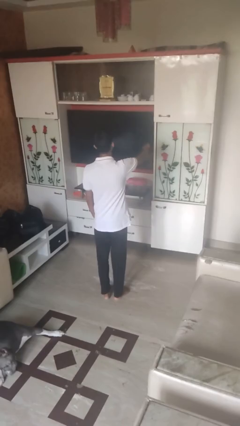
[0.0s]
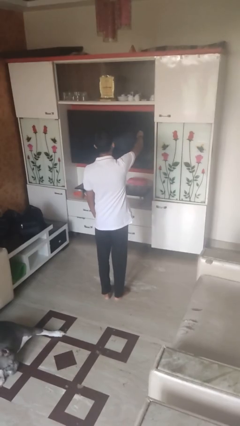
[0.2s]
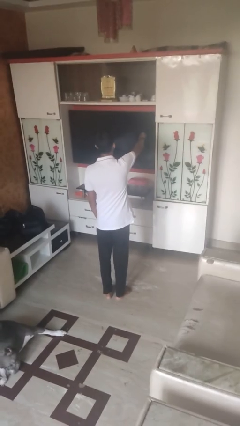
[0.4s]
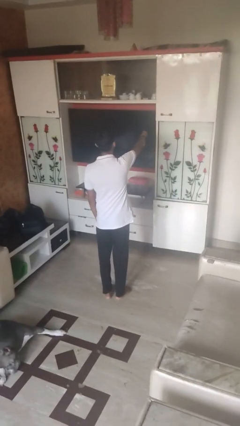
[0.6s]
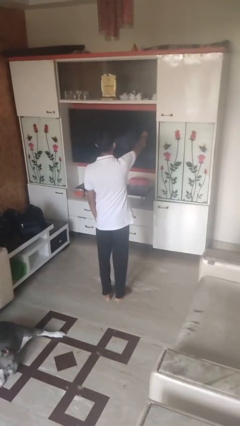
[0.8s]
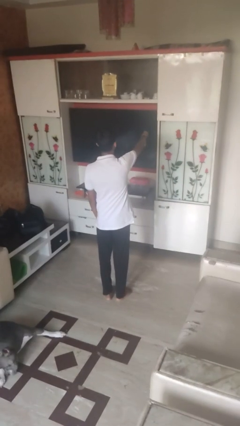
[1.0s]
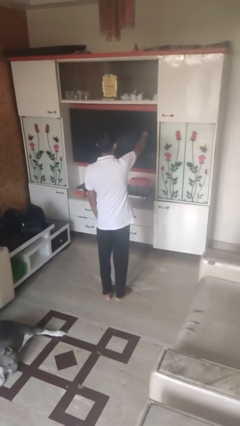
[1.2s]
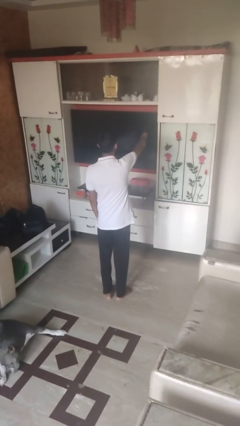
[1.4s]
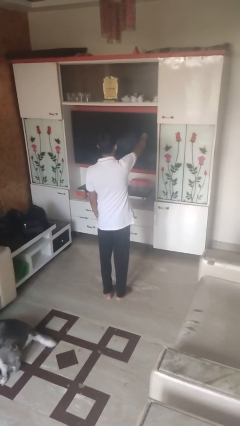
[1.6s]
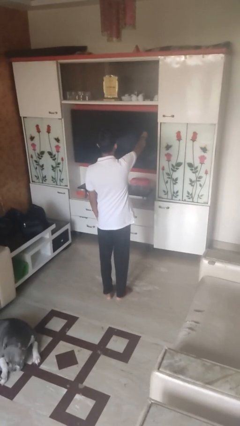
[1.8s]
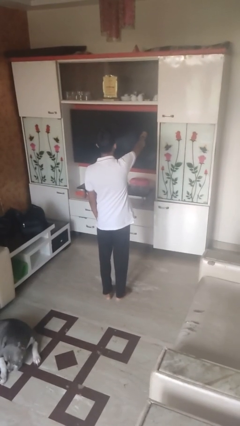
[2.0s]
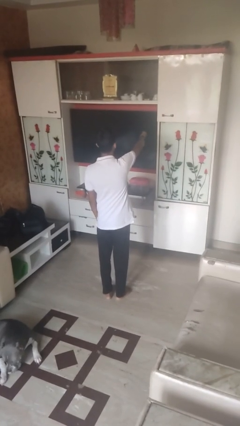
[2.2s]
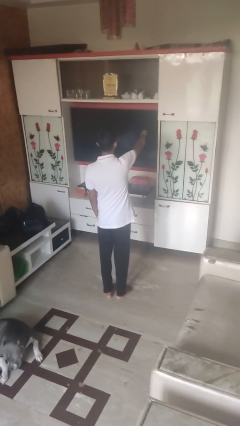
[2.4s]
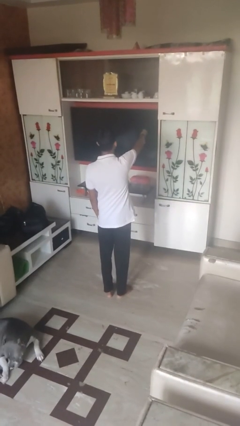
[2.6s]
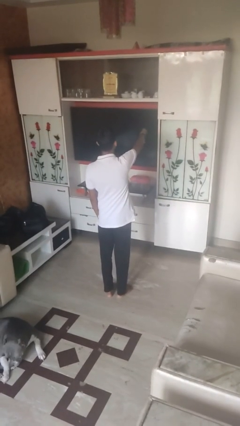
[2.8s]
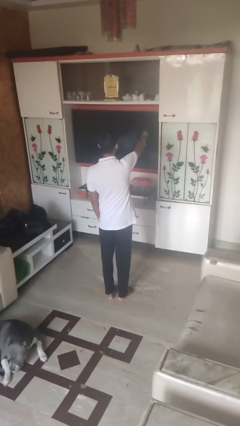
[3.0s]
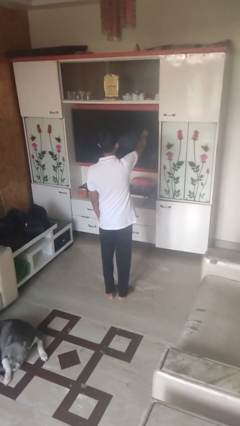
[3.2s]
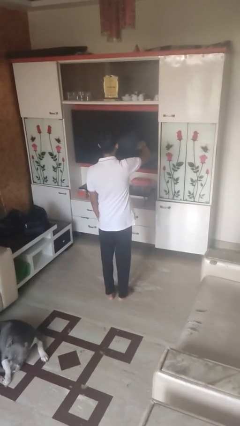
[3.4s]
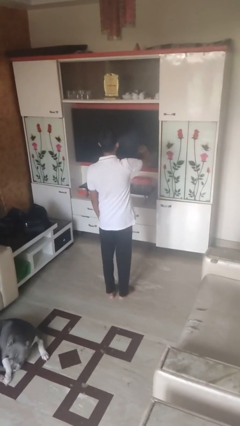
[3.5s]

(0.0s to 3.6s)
person gestures thumbs down

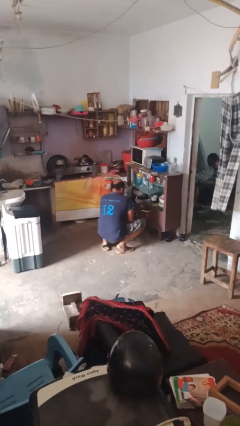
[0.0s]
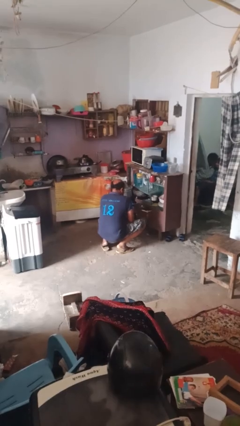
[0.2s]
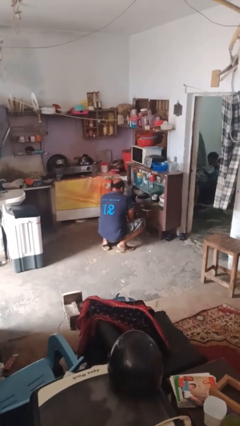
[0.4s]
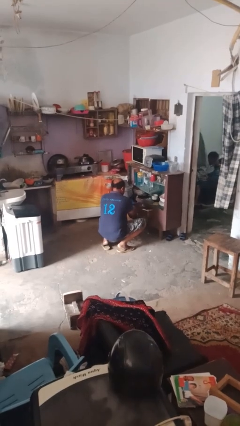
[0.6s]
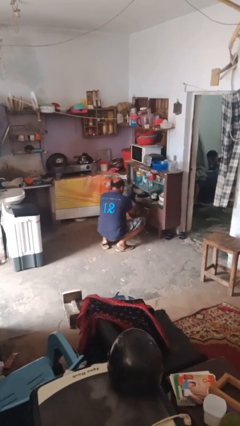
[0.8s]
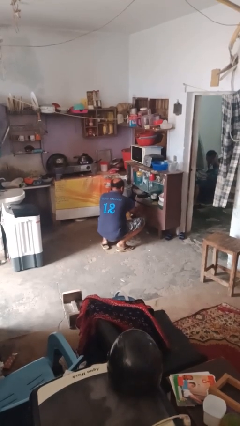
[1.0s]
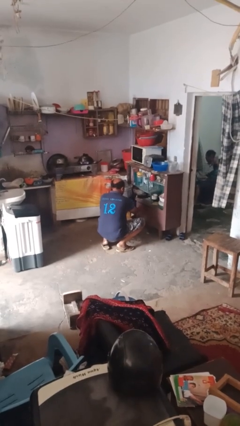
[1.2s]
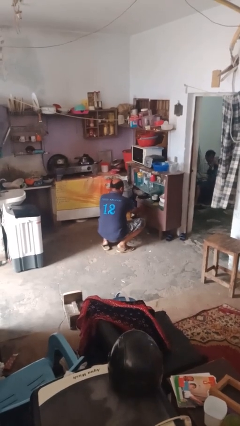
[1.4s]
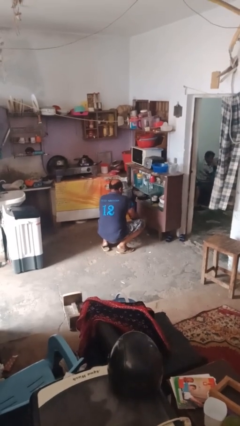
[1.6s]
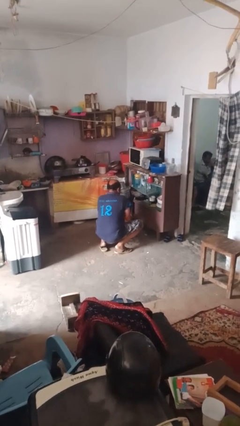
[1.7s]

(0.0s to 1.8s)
person closes kitchen drawer

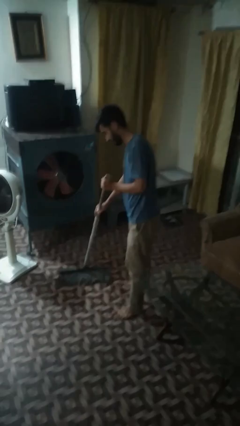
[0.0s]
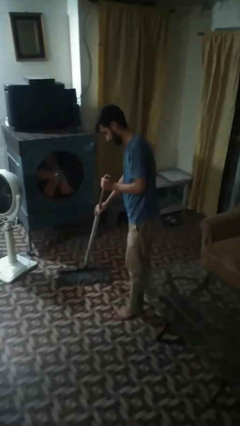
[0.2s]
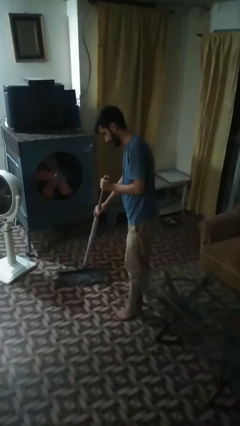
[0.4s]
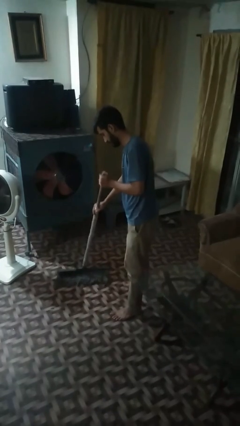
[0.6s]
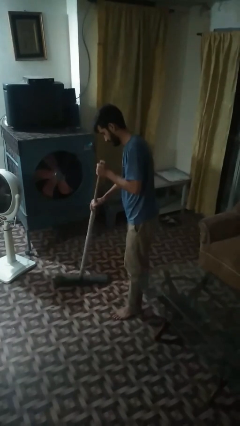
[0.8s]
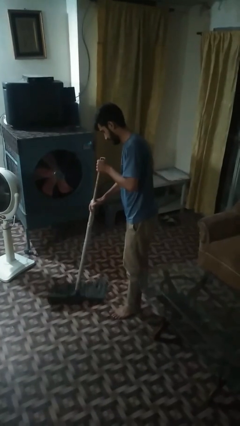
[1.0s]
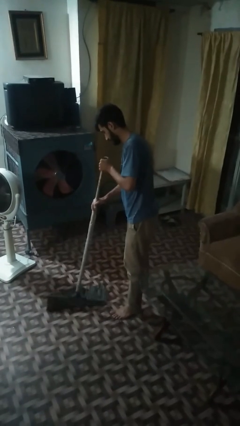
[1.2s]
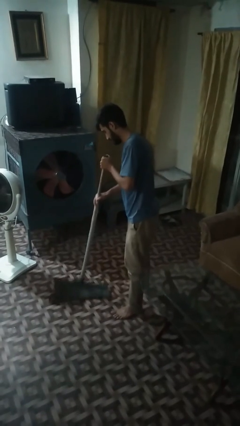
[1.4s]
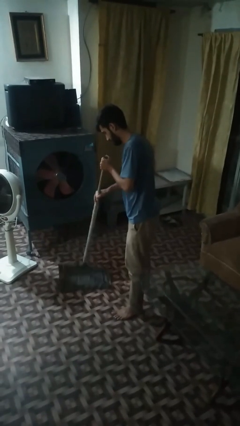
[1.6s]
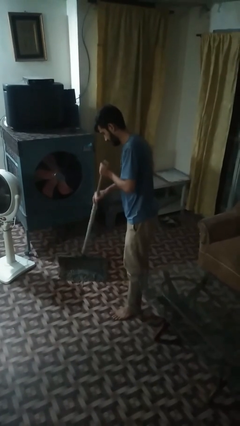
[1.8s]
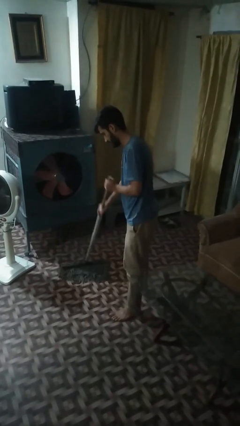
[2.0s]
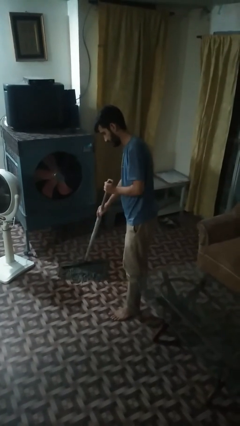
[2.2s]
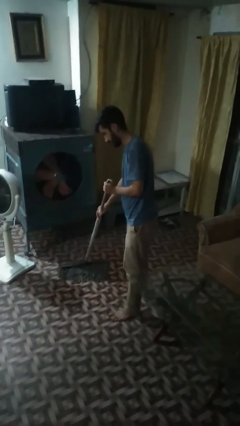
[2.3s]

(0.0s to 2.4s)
person mops

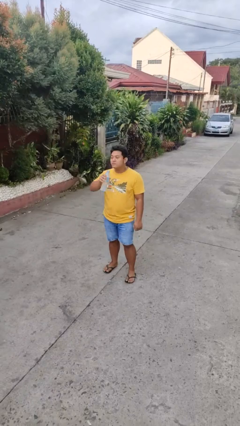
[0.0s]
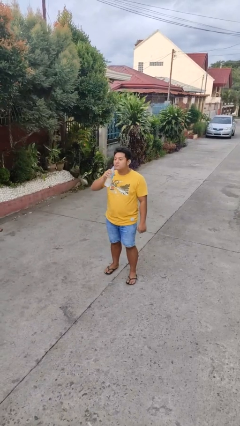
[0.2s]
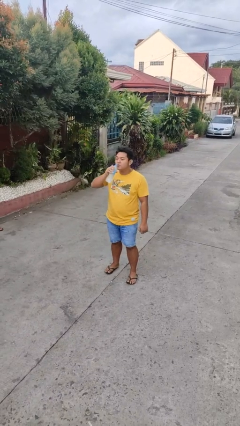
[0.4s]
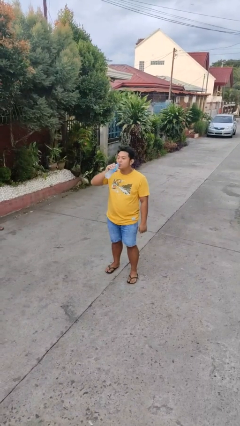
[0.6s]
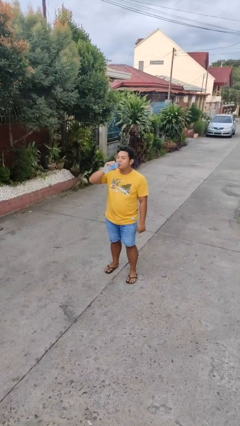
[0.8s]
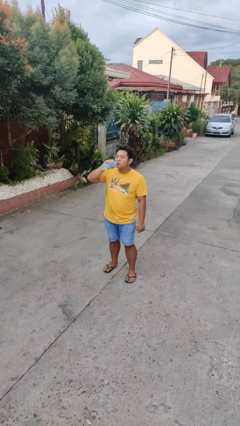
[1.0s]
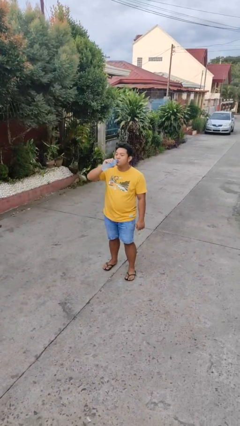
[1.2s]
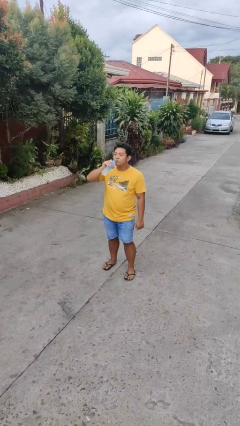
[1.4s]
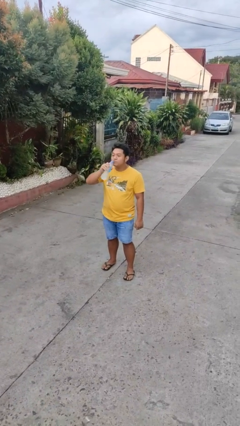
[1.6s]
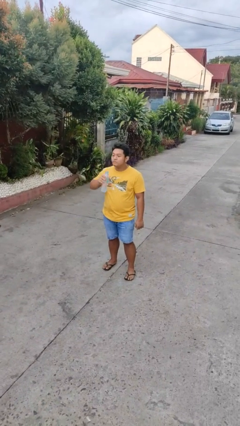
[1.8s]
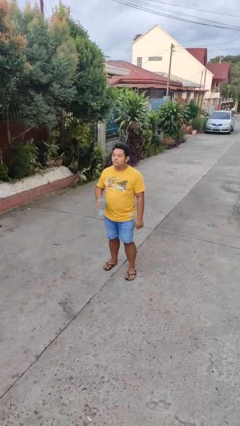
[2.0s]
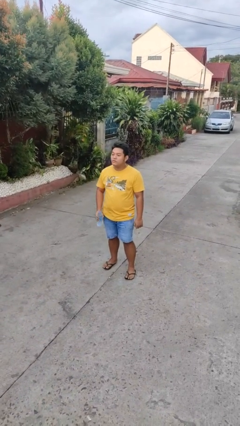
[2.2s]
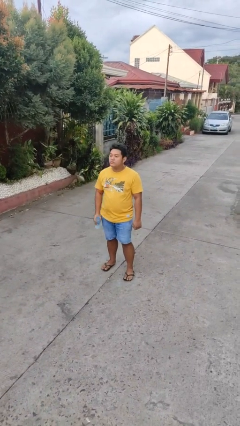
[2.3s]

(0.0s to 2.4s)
person drinks from bottle

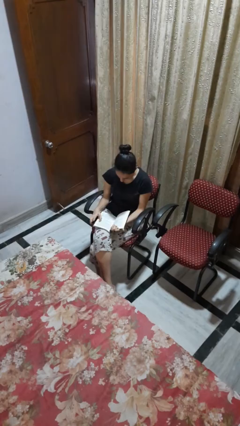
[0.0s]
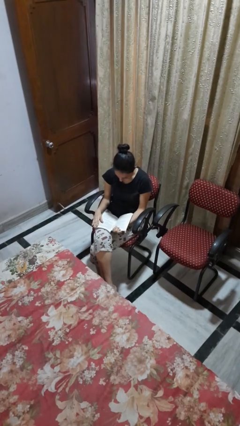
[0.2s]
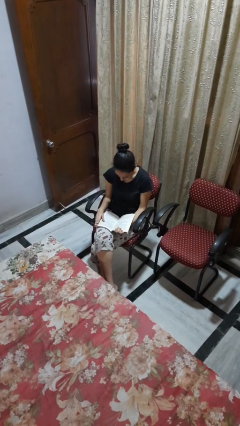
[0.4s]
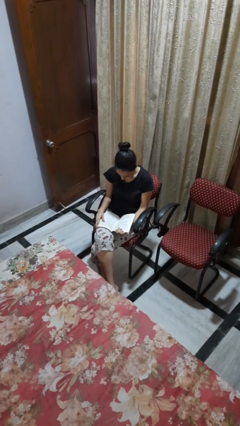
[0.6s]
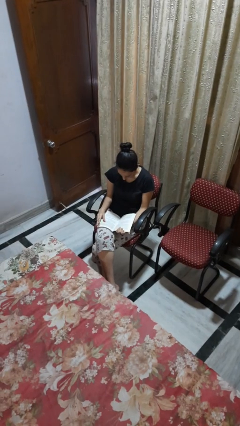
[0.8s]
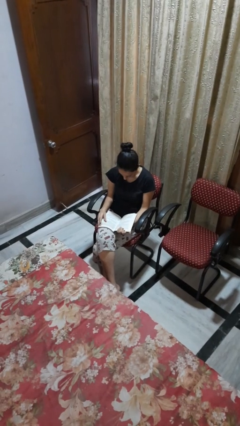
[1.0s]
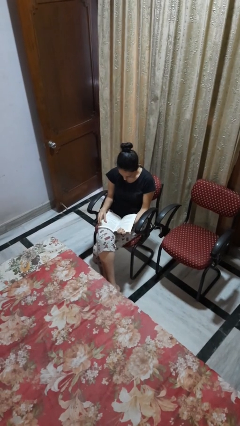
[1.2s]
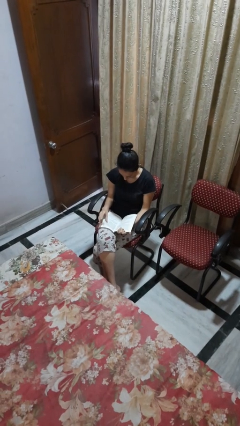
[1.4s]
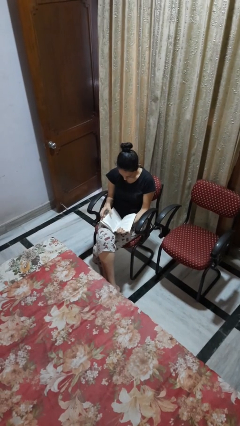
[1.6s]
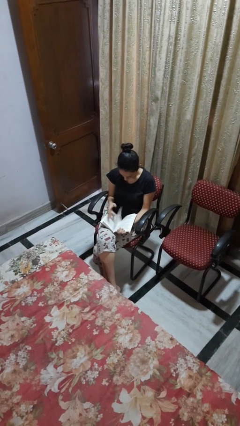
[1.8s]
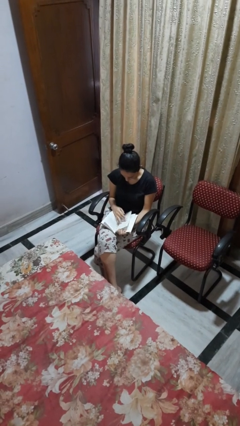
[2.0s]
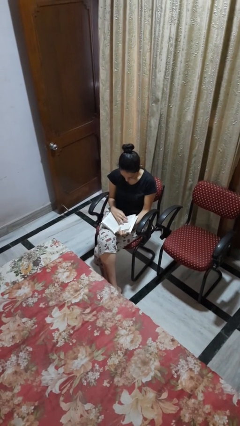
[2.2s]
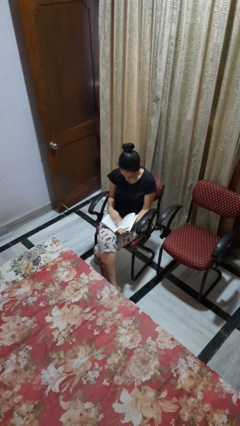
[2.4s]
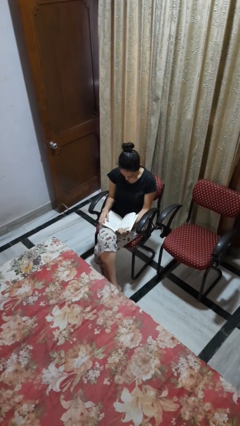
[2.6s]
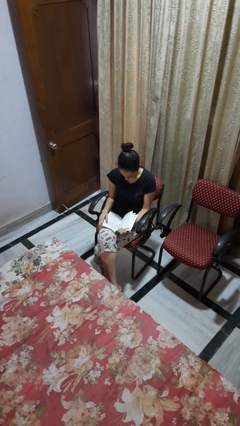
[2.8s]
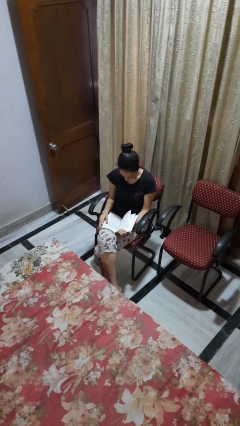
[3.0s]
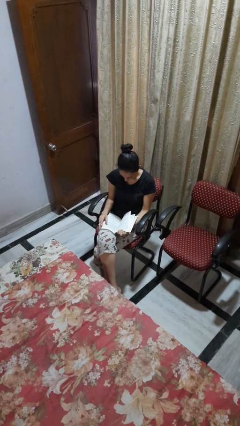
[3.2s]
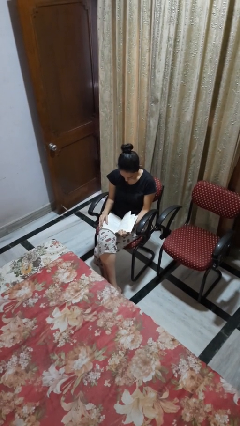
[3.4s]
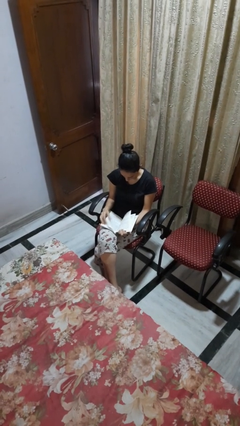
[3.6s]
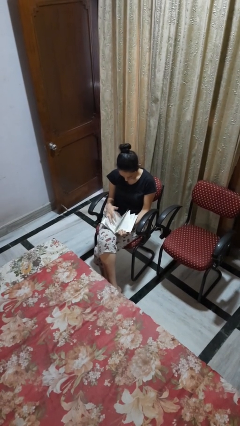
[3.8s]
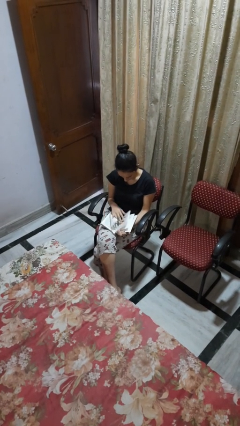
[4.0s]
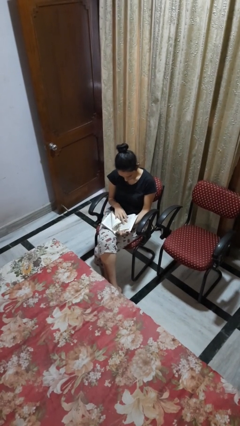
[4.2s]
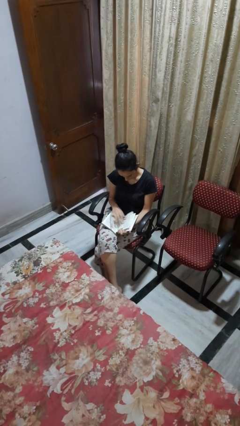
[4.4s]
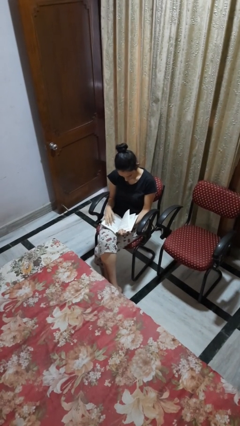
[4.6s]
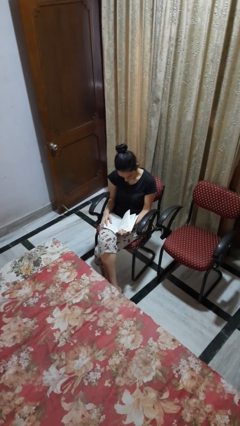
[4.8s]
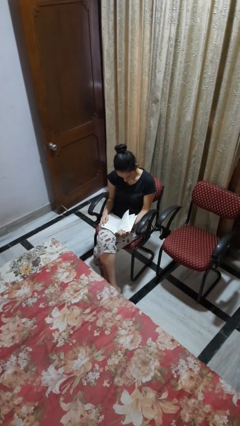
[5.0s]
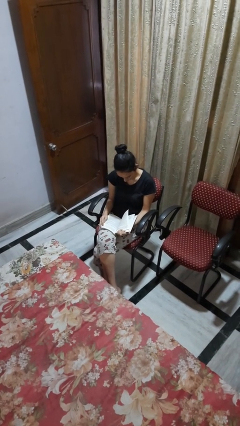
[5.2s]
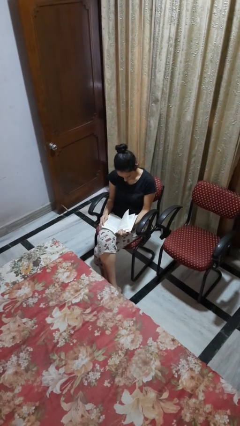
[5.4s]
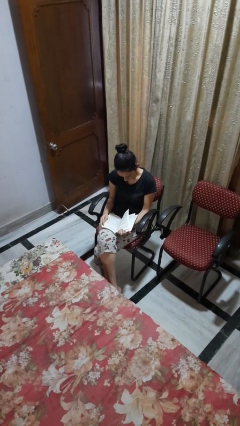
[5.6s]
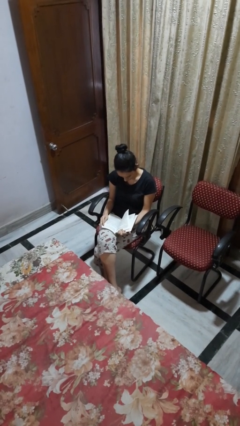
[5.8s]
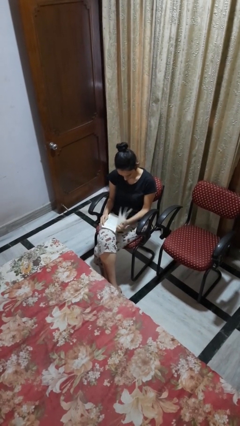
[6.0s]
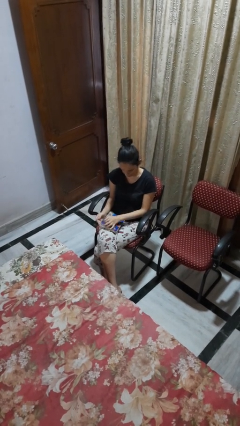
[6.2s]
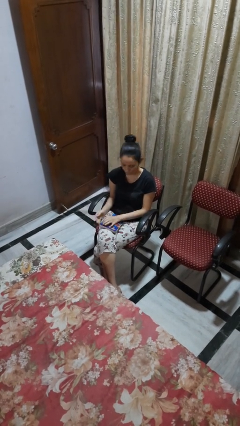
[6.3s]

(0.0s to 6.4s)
person reads book

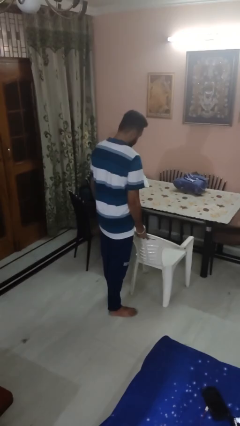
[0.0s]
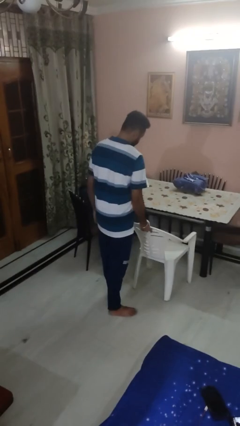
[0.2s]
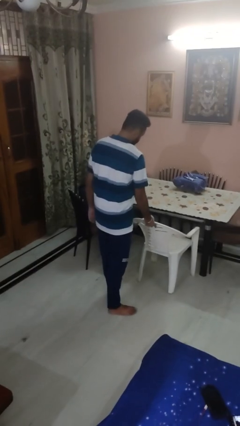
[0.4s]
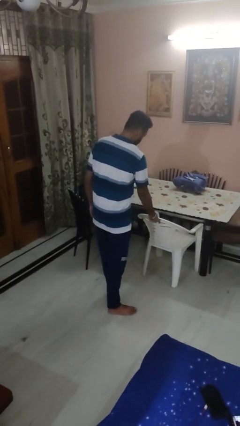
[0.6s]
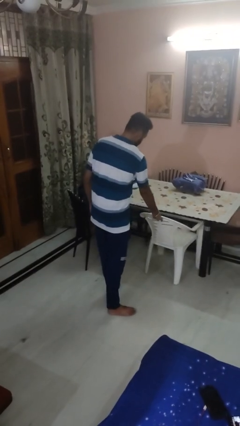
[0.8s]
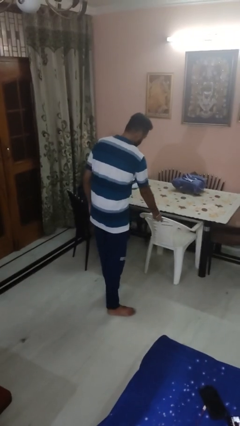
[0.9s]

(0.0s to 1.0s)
person pushes in chair

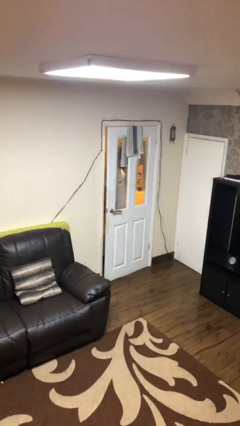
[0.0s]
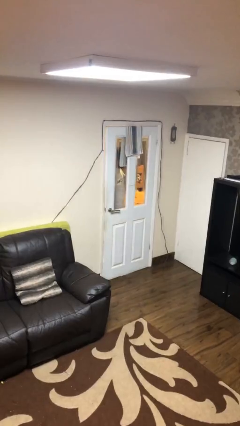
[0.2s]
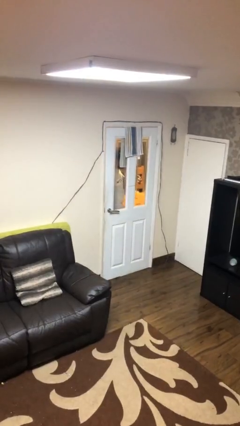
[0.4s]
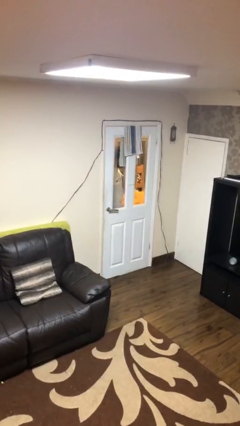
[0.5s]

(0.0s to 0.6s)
person opens facility door
